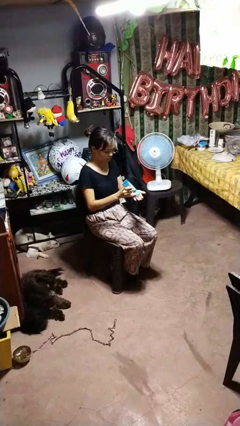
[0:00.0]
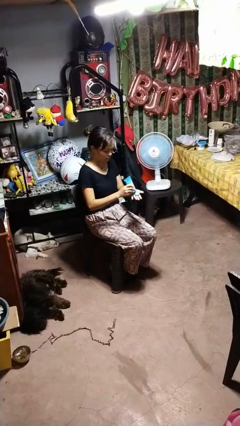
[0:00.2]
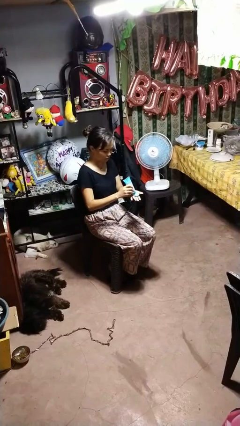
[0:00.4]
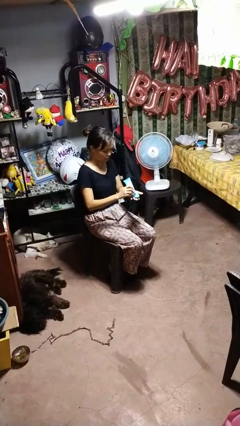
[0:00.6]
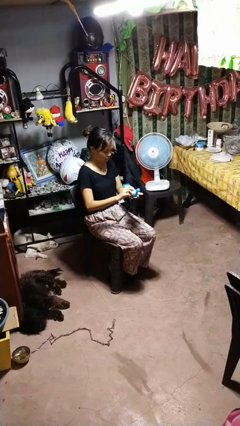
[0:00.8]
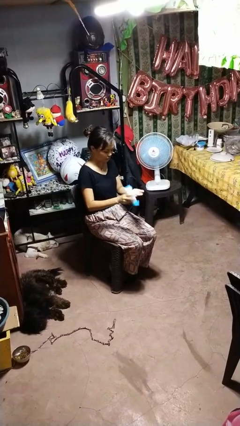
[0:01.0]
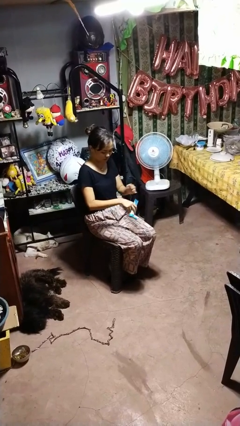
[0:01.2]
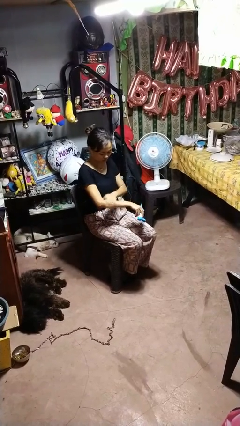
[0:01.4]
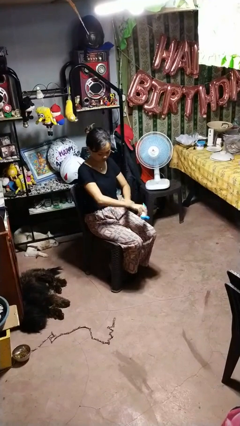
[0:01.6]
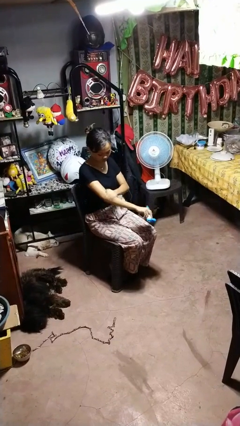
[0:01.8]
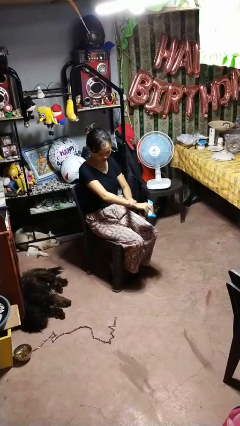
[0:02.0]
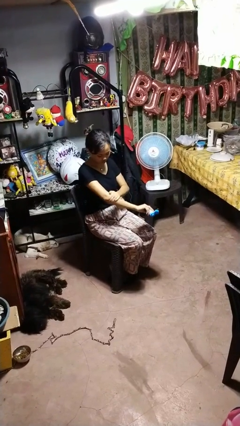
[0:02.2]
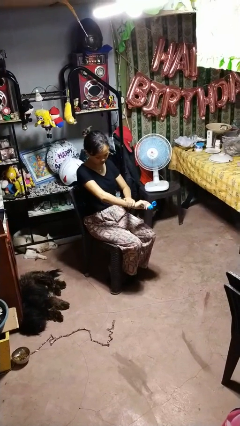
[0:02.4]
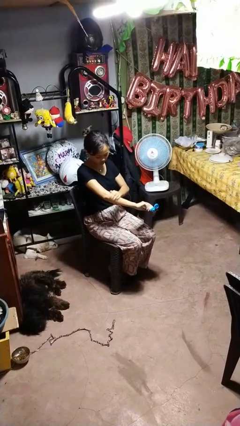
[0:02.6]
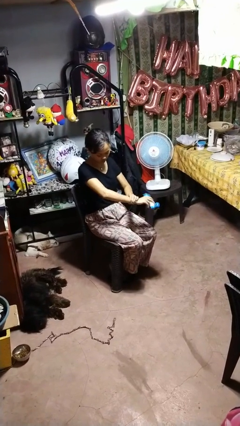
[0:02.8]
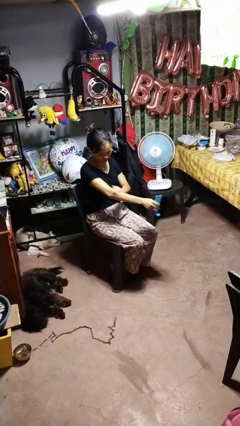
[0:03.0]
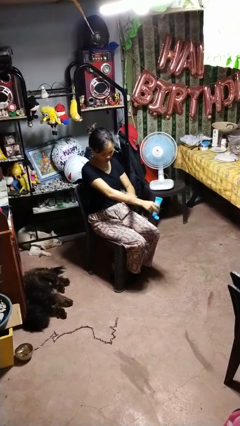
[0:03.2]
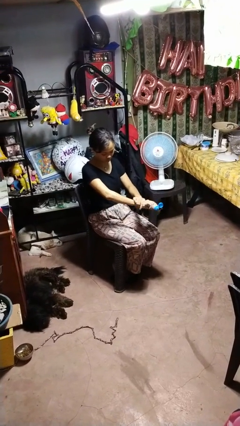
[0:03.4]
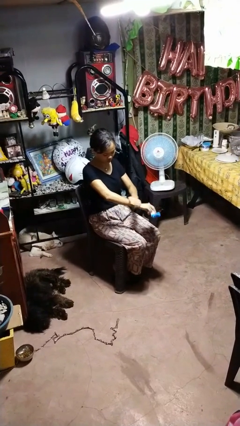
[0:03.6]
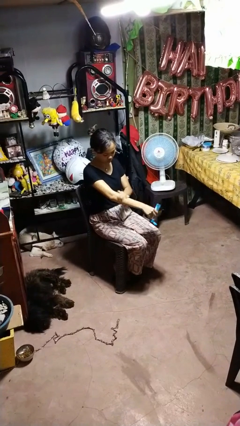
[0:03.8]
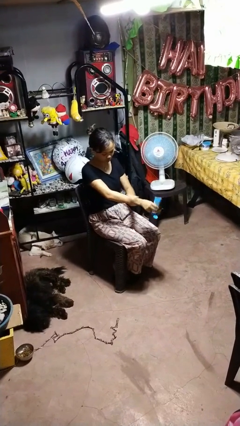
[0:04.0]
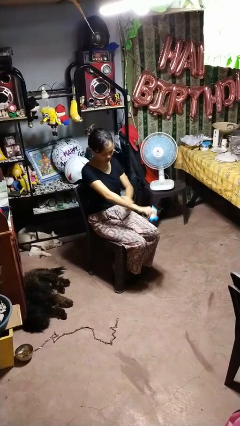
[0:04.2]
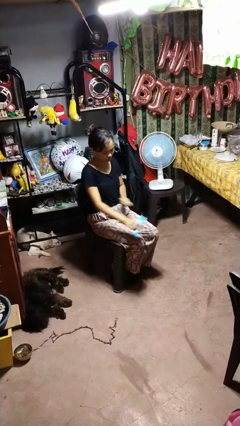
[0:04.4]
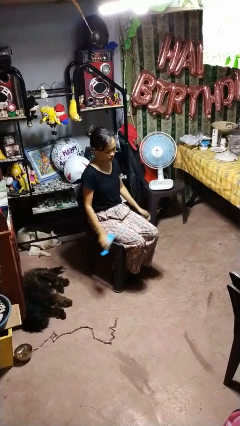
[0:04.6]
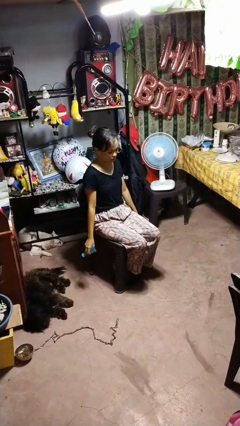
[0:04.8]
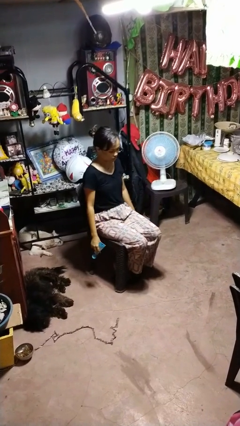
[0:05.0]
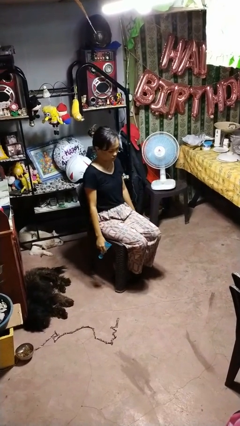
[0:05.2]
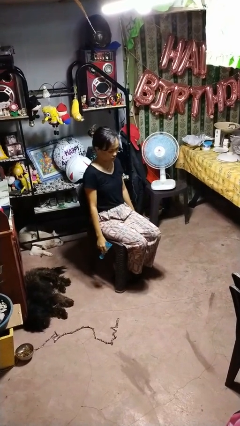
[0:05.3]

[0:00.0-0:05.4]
person applies sunscreen

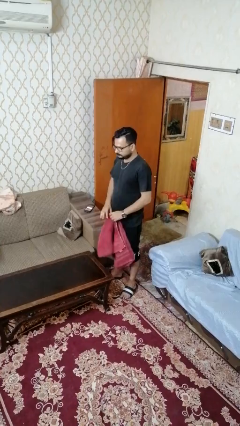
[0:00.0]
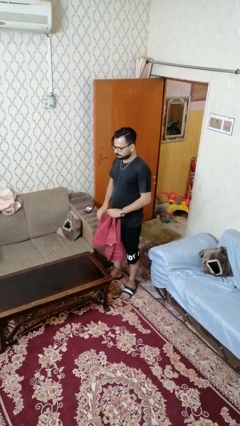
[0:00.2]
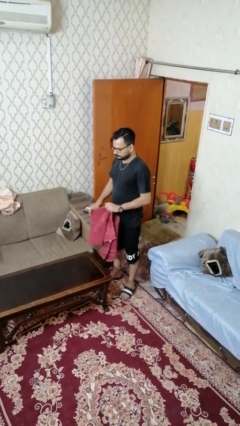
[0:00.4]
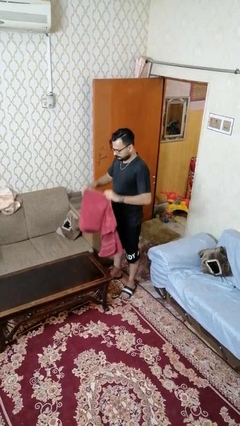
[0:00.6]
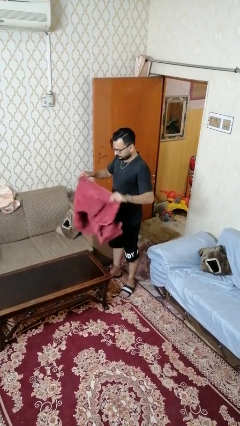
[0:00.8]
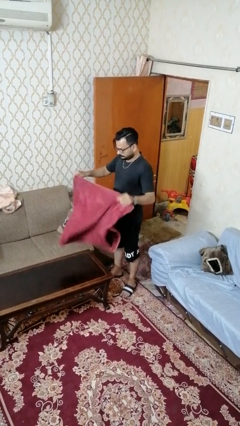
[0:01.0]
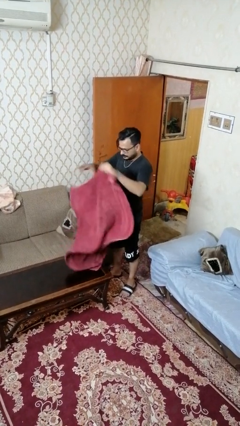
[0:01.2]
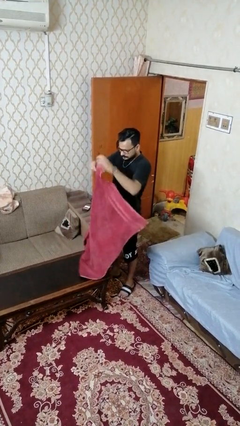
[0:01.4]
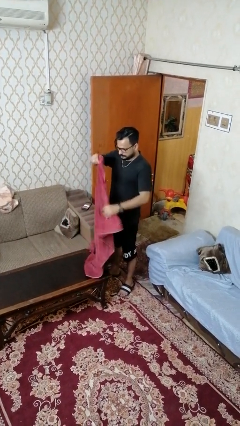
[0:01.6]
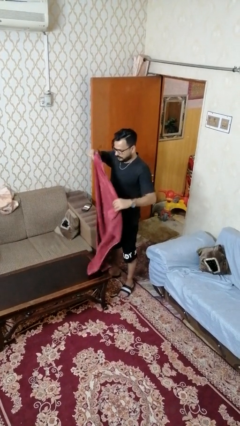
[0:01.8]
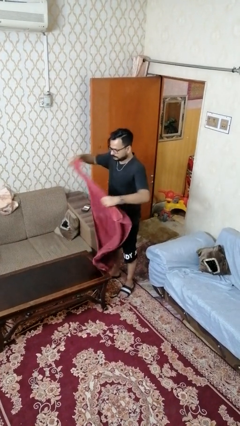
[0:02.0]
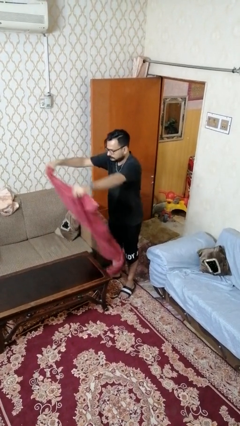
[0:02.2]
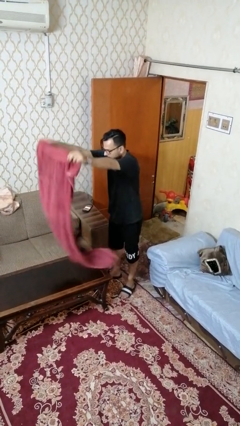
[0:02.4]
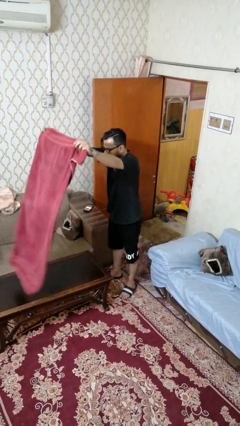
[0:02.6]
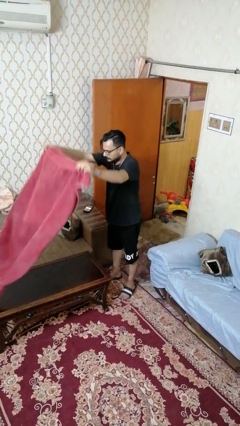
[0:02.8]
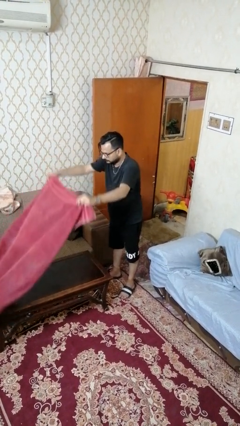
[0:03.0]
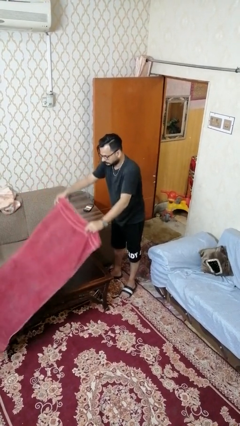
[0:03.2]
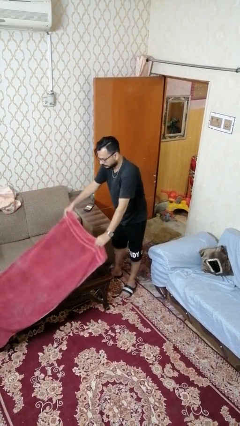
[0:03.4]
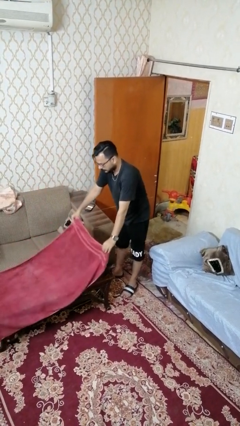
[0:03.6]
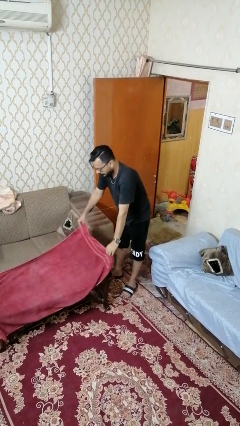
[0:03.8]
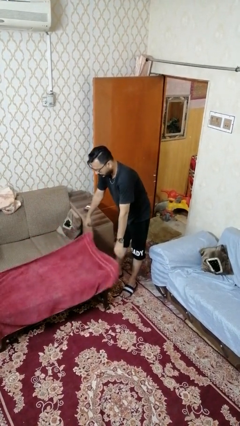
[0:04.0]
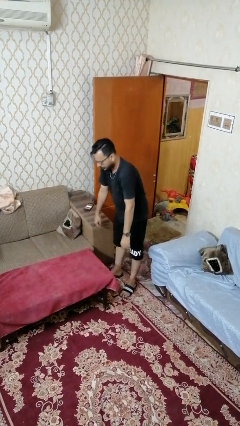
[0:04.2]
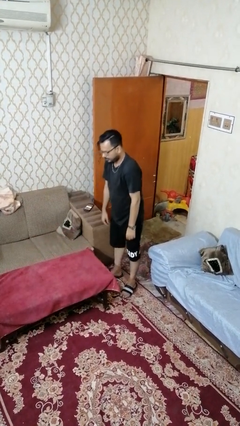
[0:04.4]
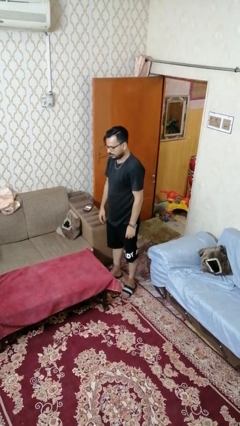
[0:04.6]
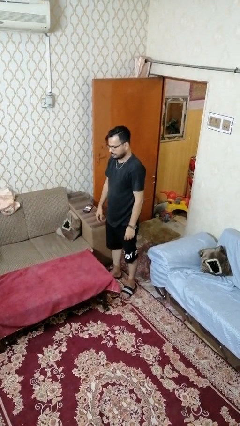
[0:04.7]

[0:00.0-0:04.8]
person spreads tablecloth

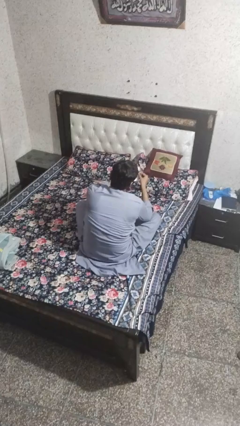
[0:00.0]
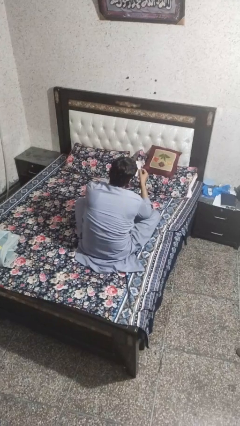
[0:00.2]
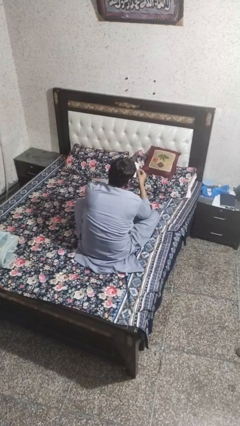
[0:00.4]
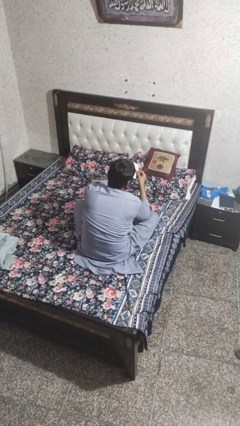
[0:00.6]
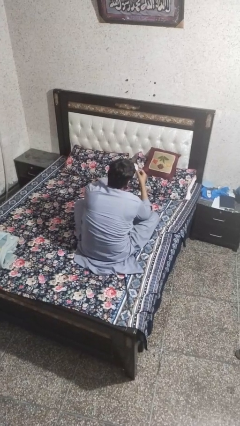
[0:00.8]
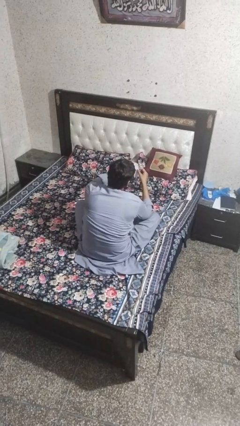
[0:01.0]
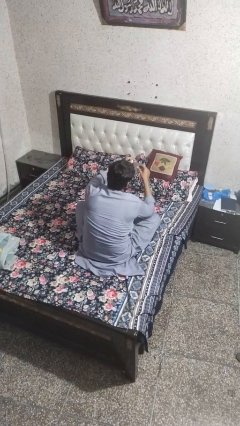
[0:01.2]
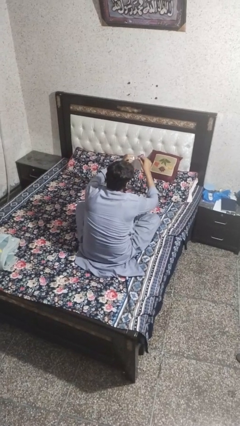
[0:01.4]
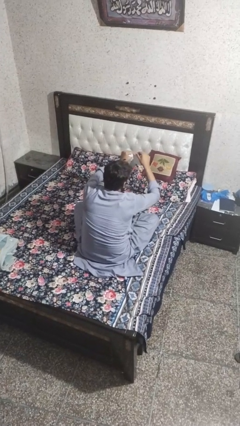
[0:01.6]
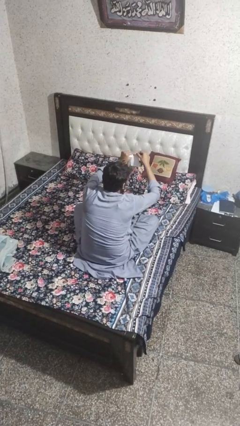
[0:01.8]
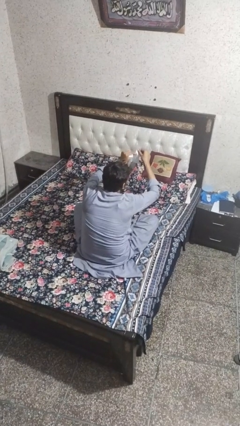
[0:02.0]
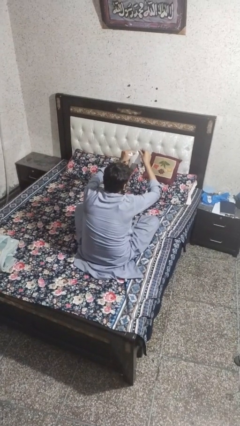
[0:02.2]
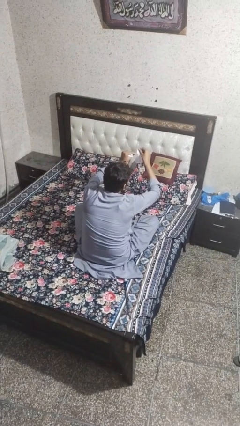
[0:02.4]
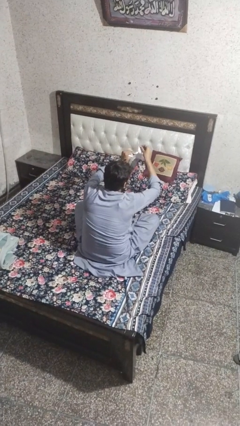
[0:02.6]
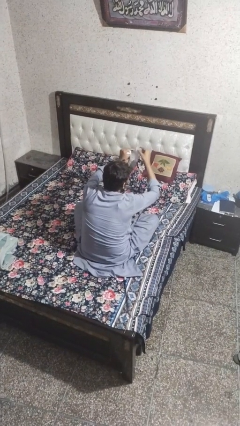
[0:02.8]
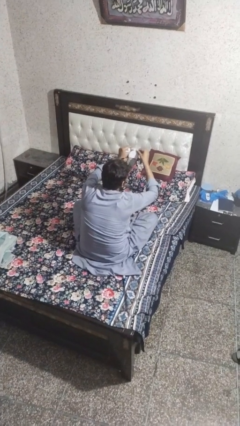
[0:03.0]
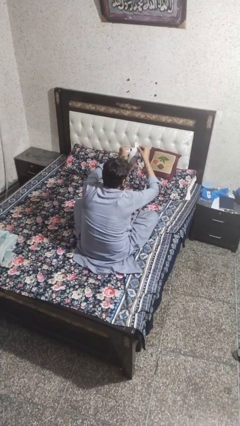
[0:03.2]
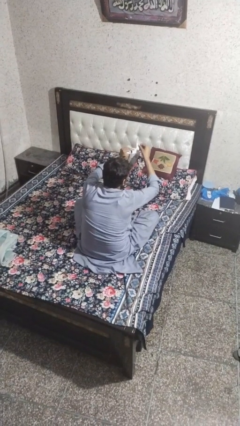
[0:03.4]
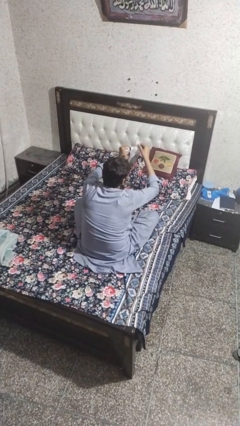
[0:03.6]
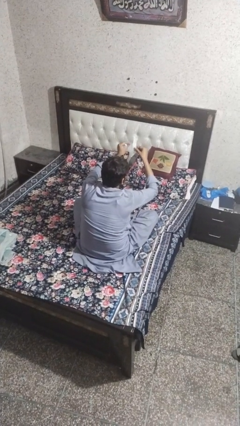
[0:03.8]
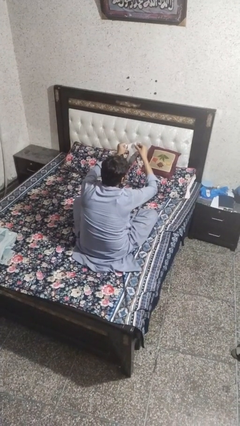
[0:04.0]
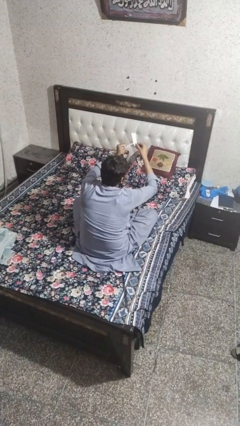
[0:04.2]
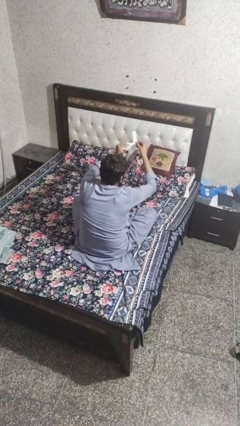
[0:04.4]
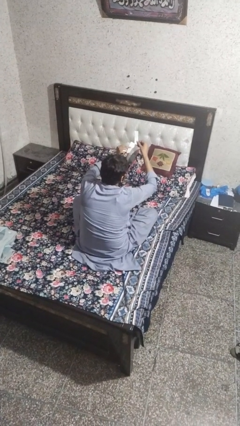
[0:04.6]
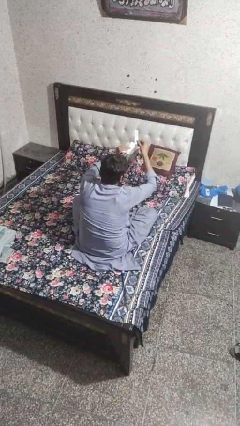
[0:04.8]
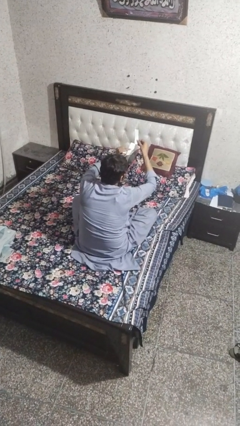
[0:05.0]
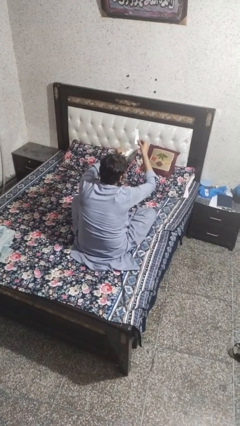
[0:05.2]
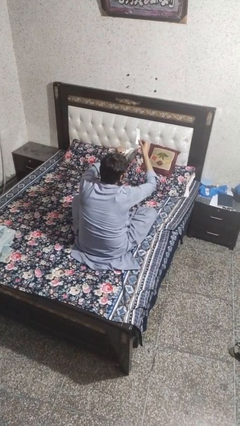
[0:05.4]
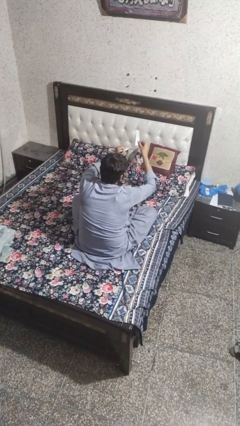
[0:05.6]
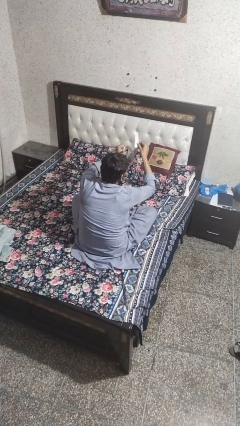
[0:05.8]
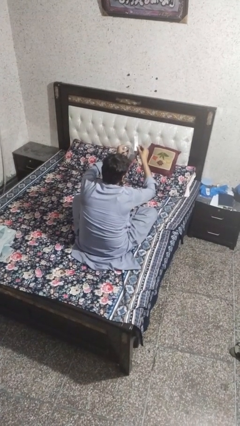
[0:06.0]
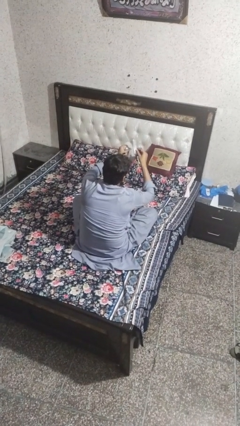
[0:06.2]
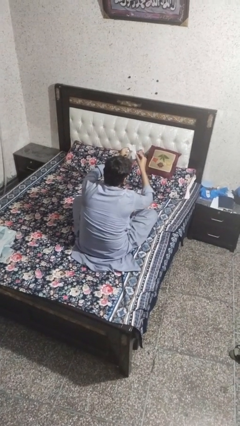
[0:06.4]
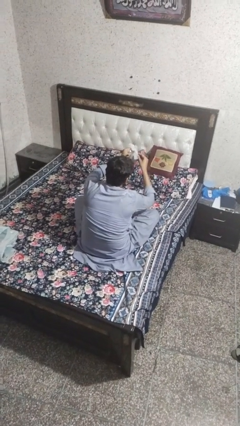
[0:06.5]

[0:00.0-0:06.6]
person tears paper

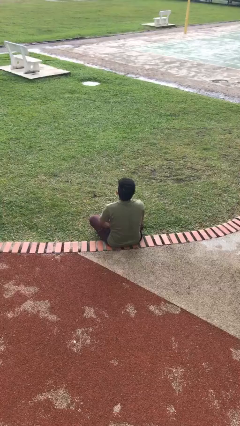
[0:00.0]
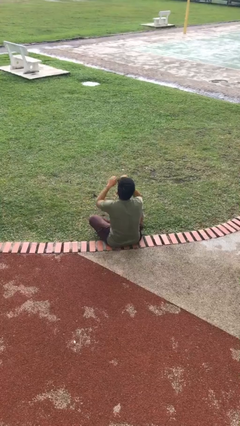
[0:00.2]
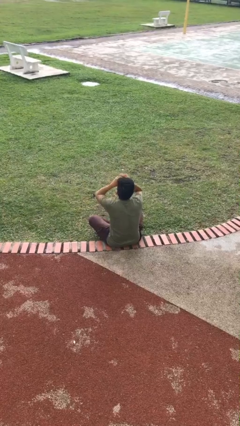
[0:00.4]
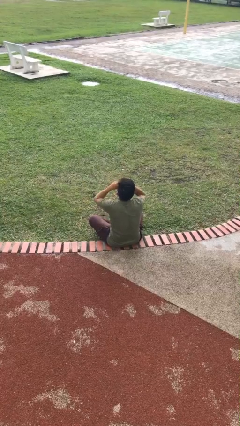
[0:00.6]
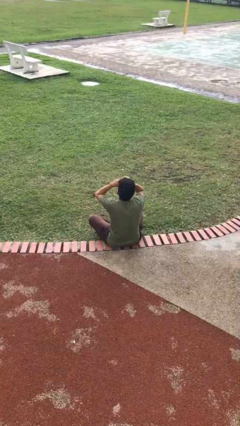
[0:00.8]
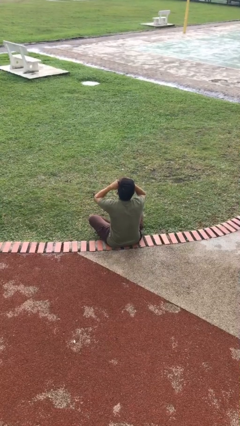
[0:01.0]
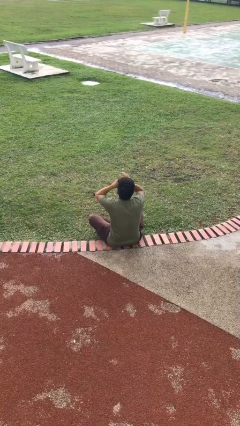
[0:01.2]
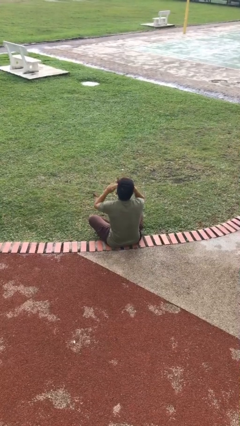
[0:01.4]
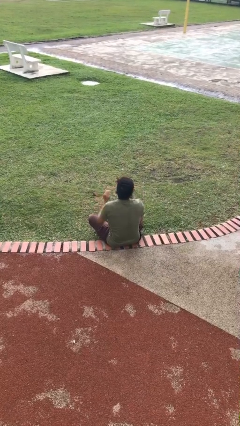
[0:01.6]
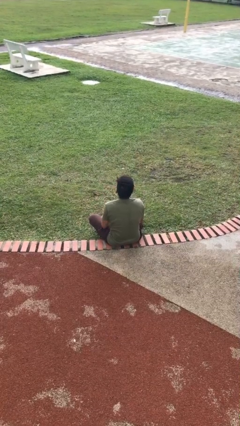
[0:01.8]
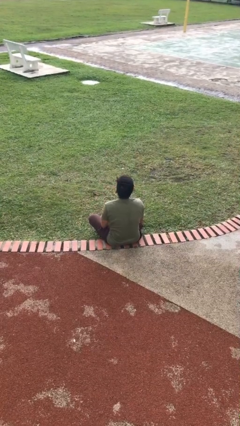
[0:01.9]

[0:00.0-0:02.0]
person rubs eyes
